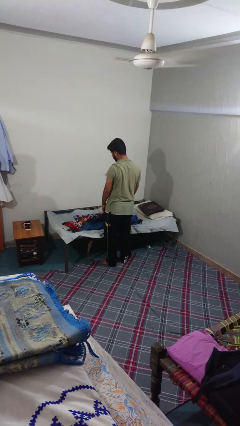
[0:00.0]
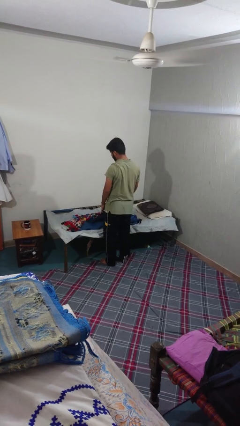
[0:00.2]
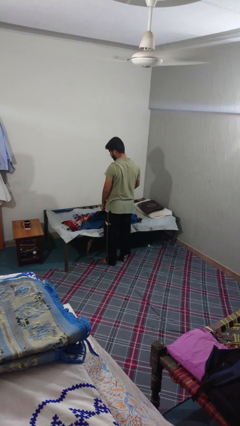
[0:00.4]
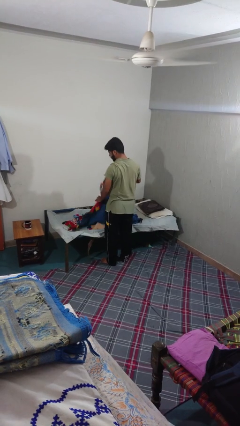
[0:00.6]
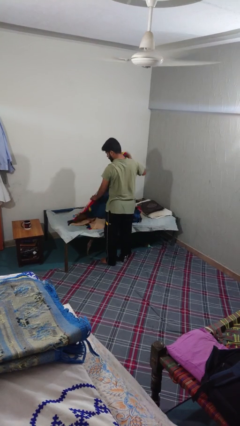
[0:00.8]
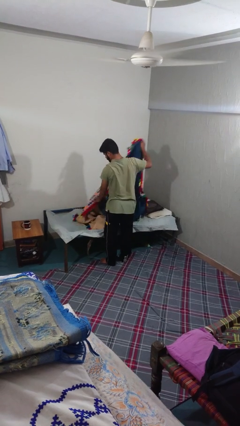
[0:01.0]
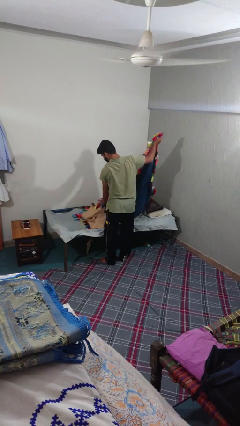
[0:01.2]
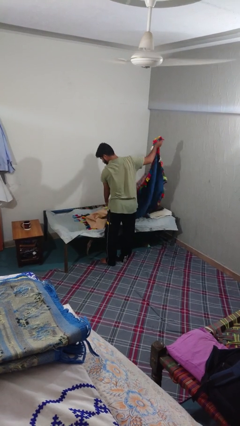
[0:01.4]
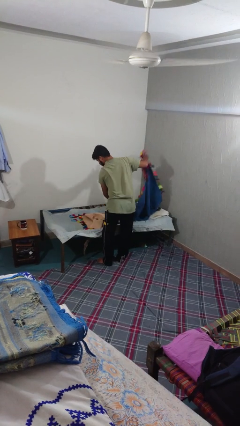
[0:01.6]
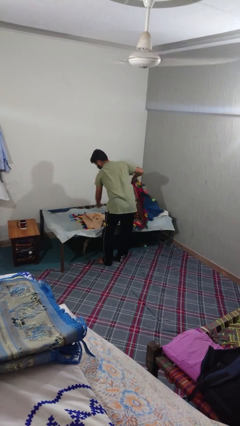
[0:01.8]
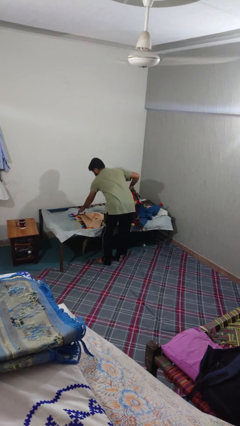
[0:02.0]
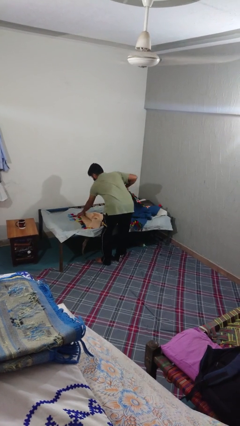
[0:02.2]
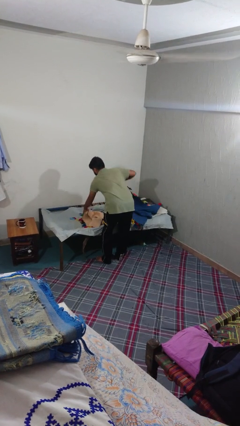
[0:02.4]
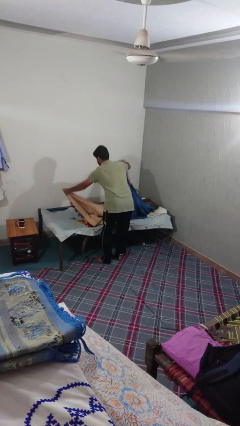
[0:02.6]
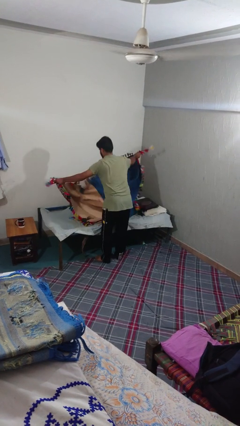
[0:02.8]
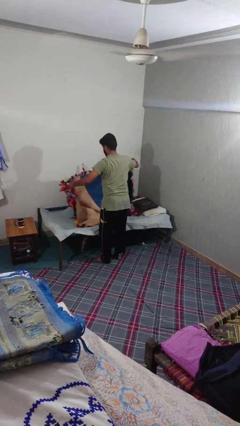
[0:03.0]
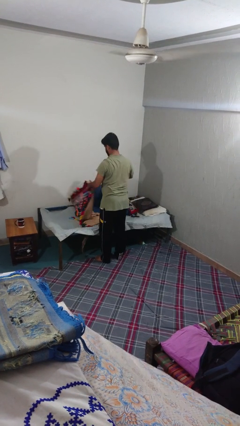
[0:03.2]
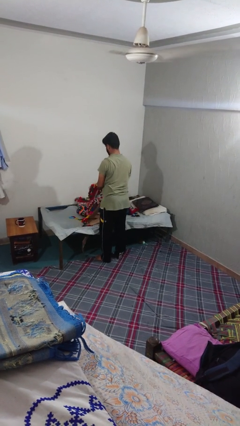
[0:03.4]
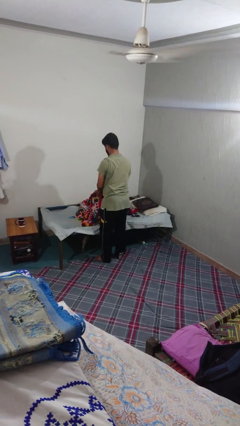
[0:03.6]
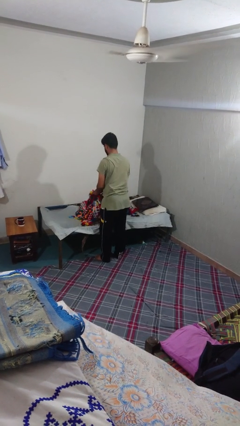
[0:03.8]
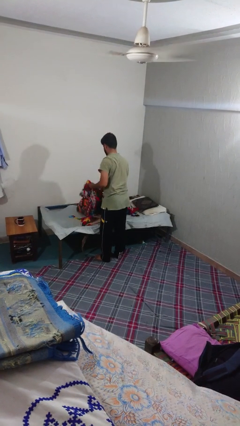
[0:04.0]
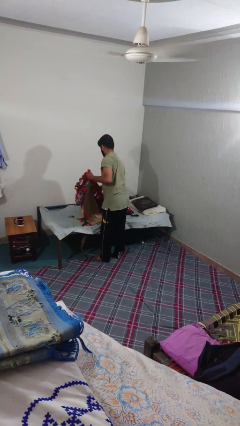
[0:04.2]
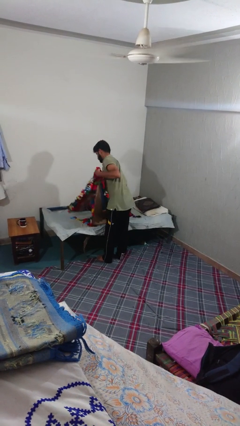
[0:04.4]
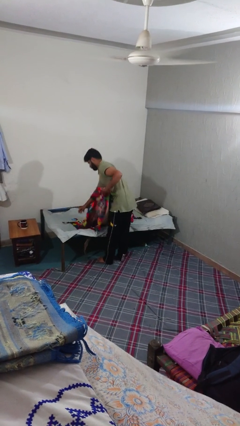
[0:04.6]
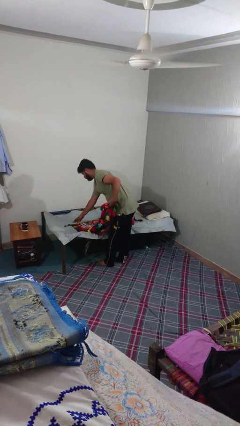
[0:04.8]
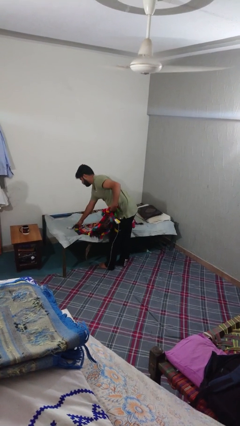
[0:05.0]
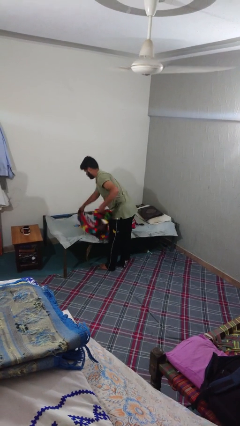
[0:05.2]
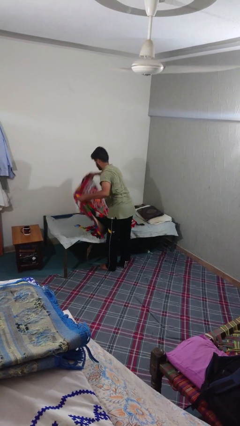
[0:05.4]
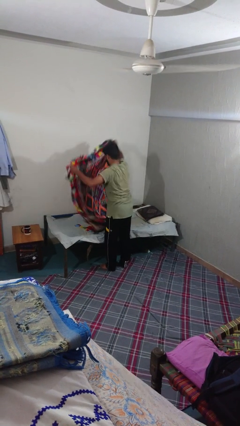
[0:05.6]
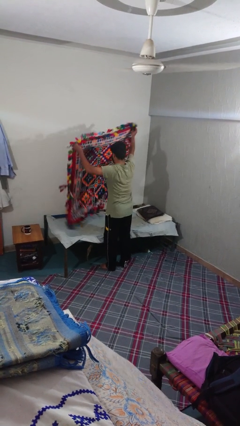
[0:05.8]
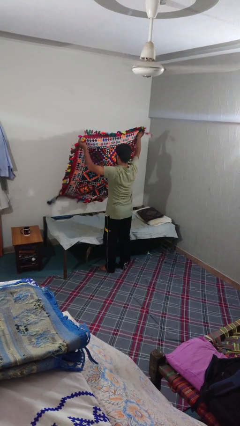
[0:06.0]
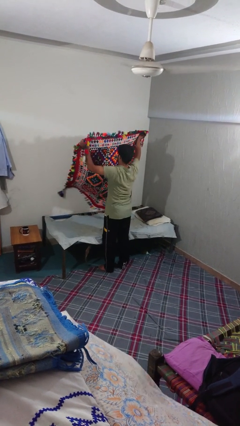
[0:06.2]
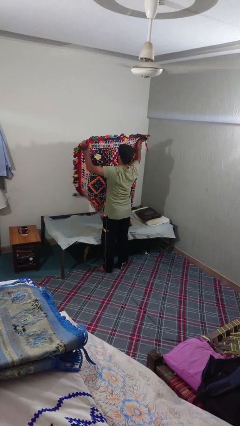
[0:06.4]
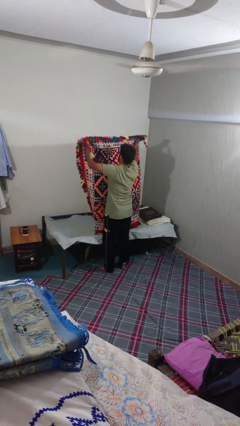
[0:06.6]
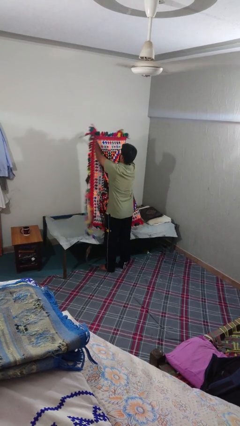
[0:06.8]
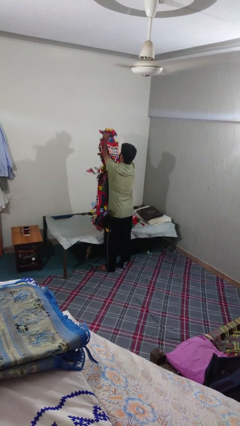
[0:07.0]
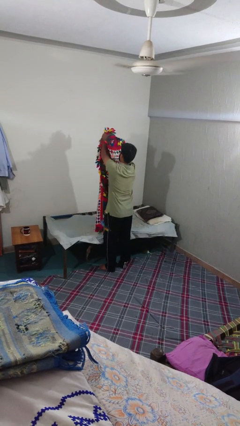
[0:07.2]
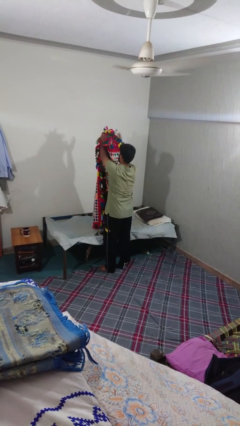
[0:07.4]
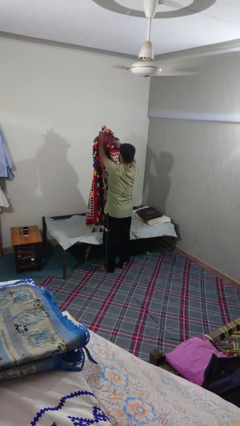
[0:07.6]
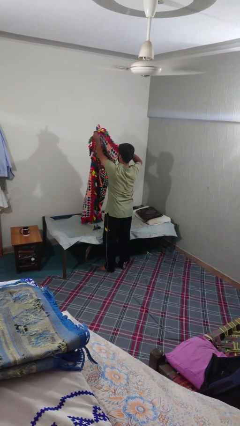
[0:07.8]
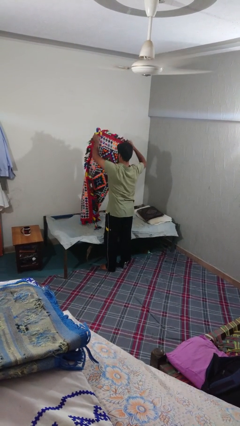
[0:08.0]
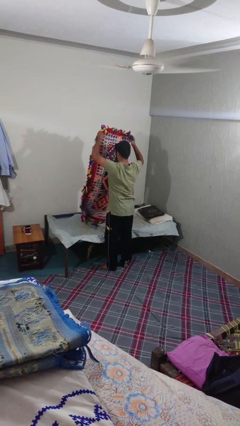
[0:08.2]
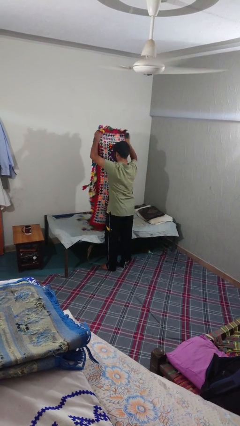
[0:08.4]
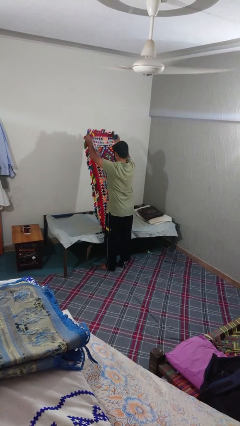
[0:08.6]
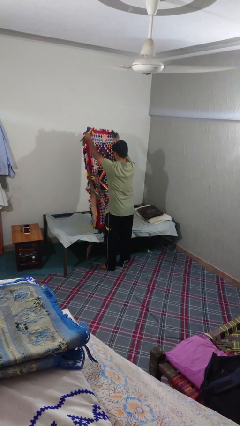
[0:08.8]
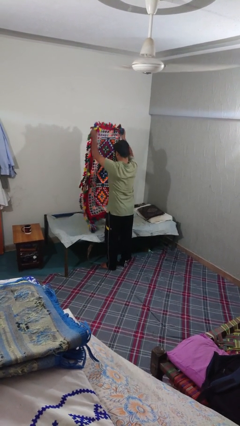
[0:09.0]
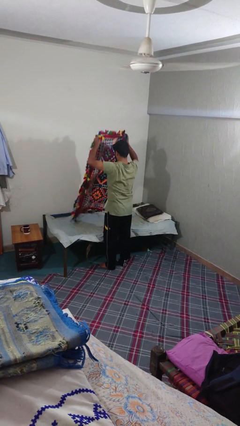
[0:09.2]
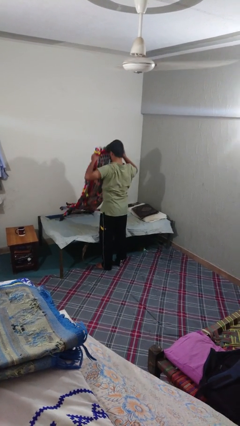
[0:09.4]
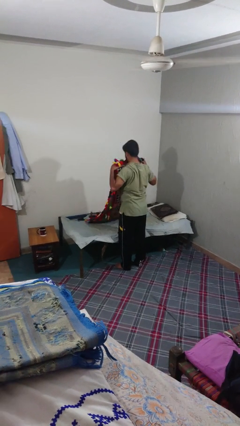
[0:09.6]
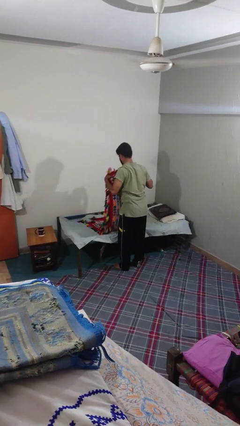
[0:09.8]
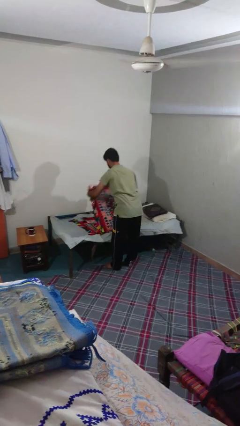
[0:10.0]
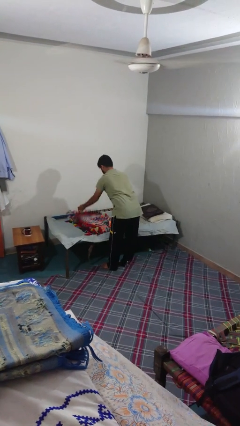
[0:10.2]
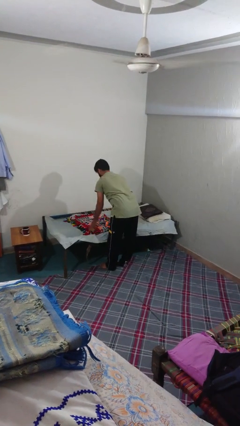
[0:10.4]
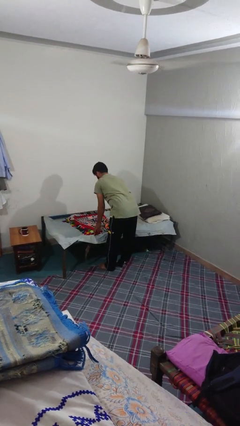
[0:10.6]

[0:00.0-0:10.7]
person folds blanket

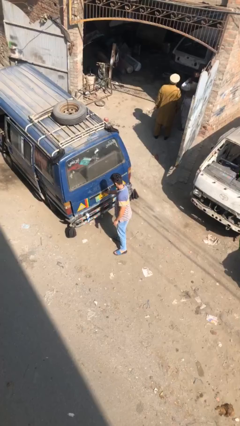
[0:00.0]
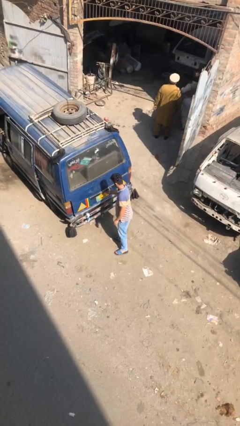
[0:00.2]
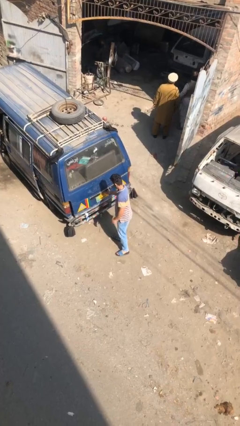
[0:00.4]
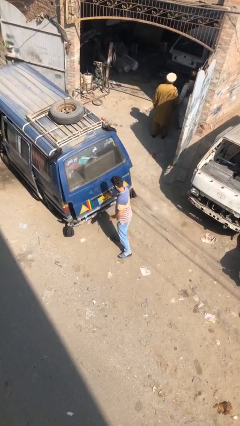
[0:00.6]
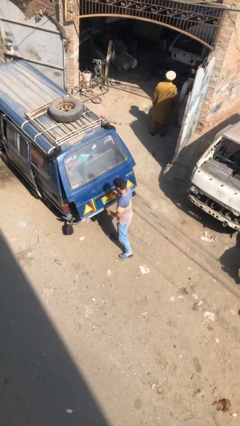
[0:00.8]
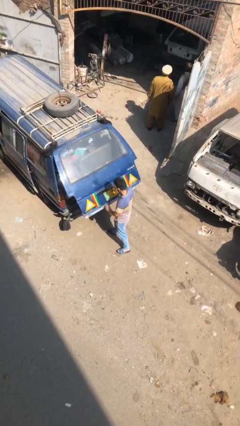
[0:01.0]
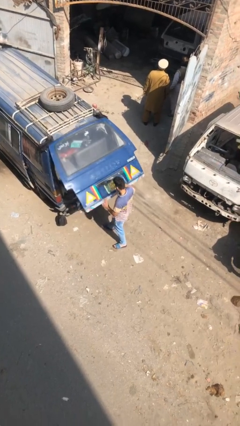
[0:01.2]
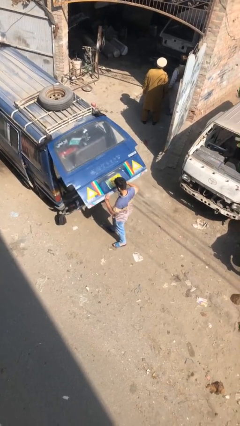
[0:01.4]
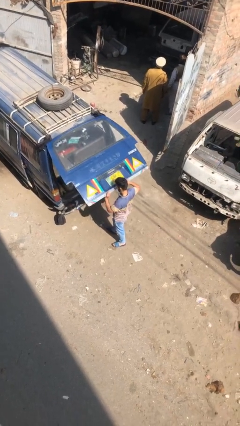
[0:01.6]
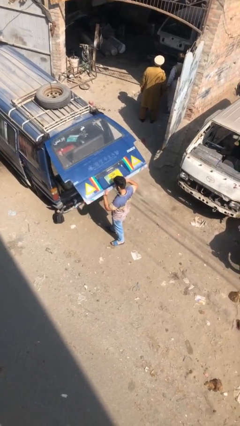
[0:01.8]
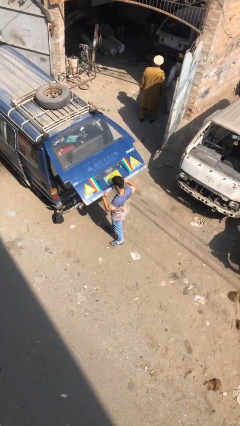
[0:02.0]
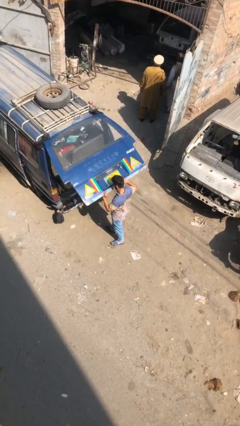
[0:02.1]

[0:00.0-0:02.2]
person opens car trunk

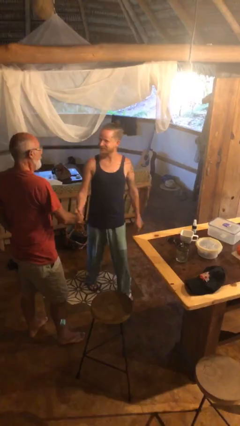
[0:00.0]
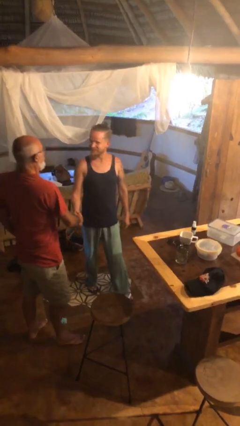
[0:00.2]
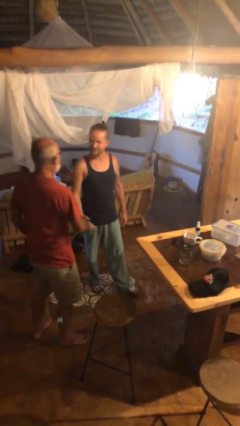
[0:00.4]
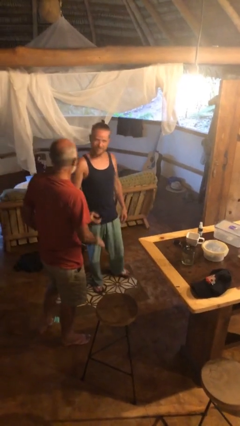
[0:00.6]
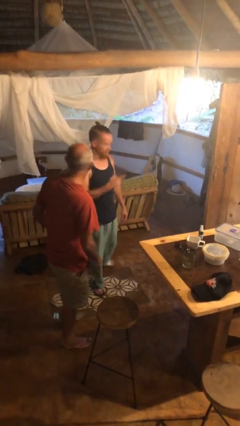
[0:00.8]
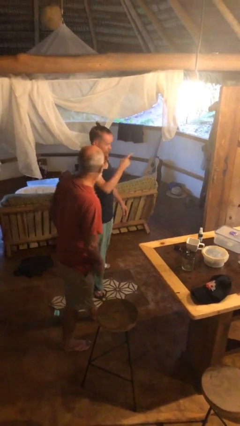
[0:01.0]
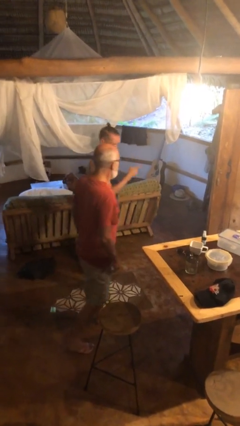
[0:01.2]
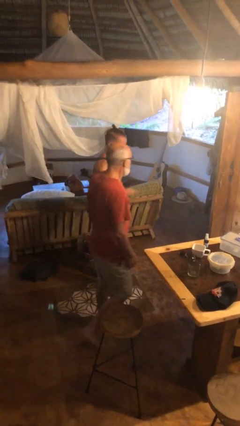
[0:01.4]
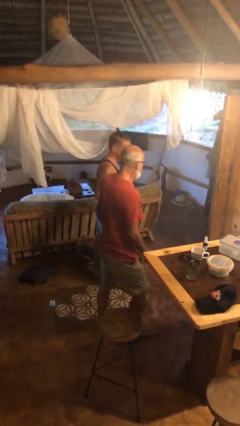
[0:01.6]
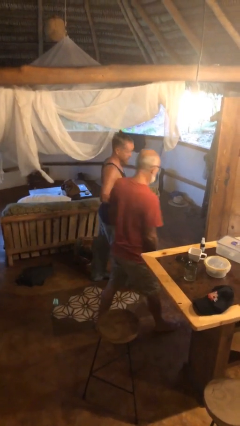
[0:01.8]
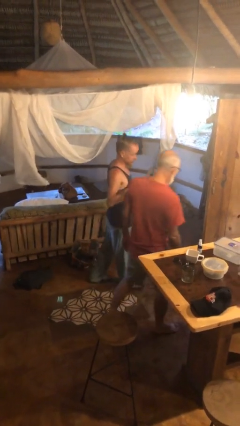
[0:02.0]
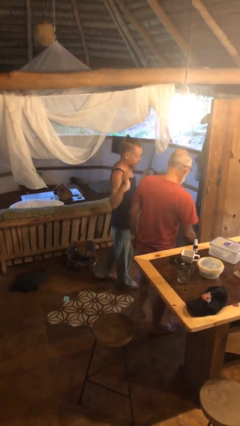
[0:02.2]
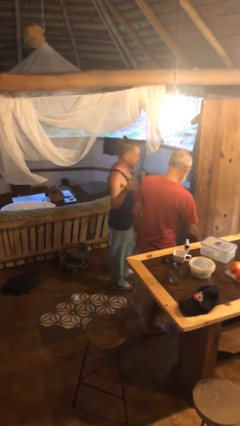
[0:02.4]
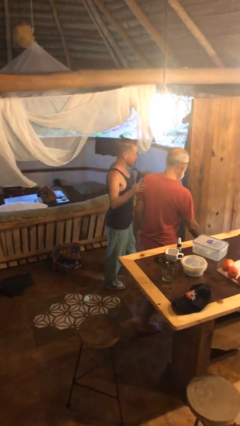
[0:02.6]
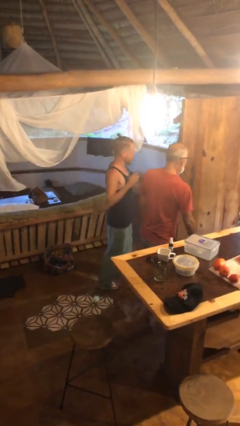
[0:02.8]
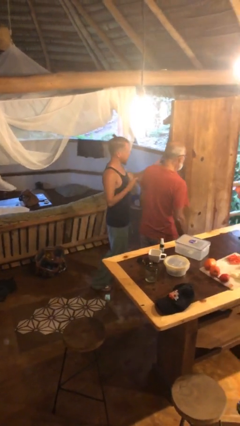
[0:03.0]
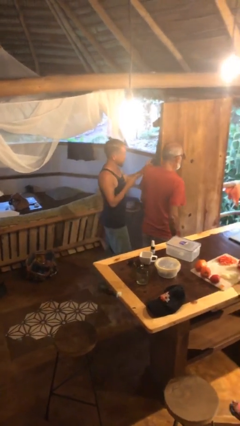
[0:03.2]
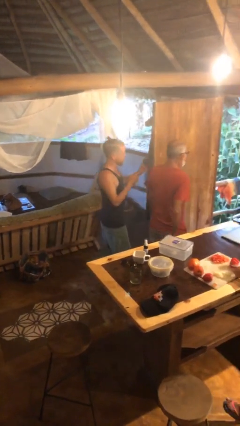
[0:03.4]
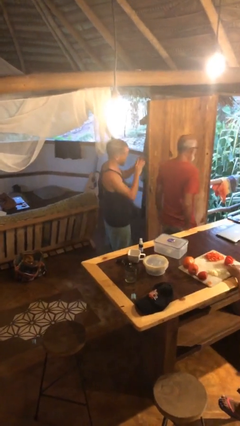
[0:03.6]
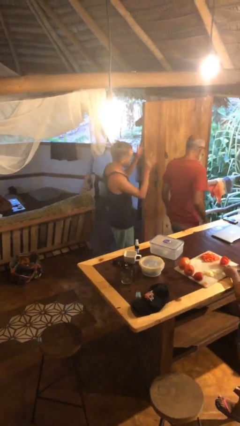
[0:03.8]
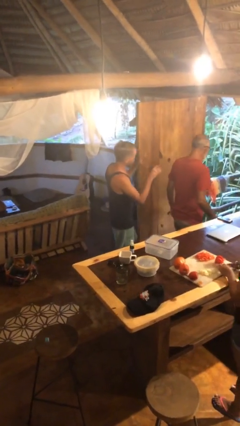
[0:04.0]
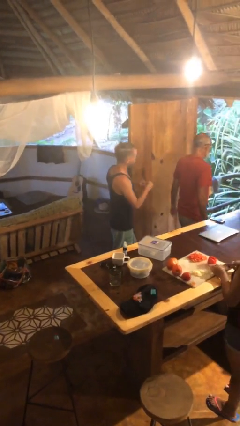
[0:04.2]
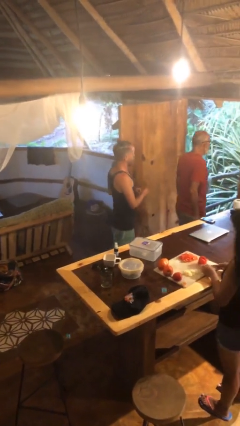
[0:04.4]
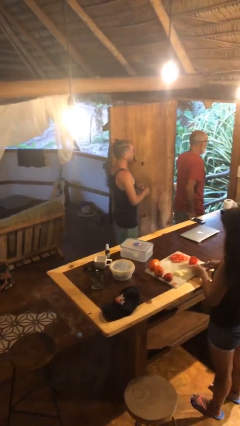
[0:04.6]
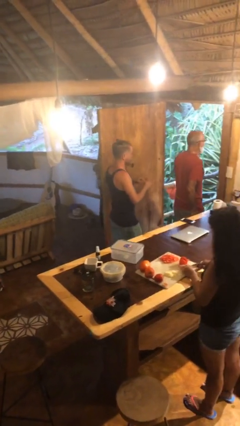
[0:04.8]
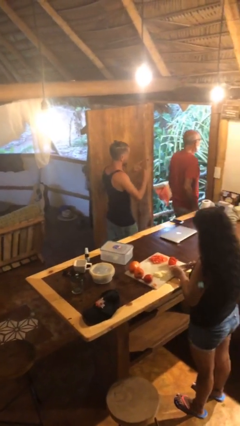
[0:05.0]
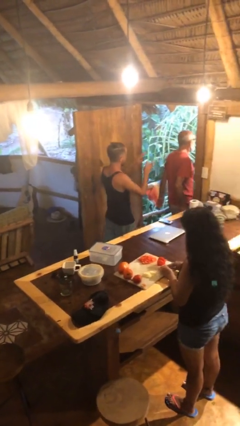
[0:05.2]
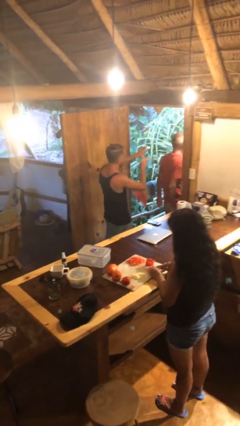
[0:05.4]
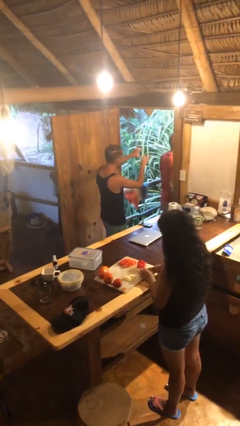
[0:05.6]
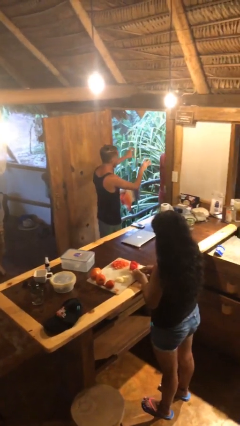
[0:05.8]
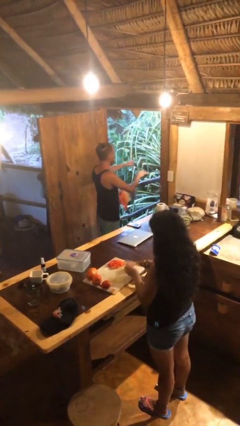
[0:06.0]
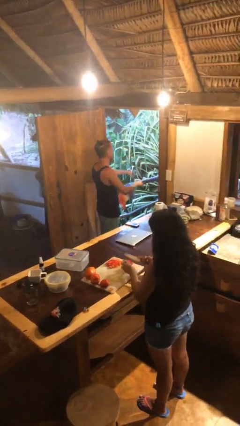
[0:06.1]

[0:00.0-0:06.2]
person talks to person
